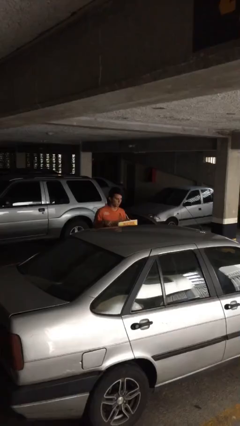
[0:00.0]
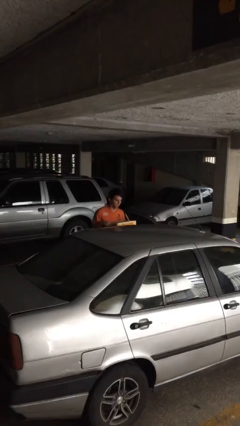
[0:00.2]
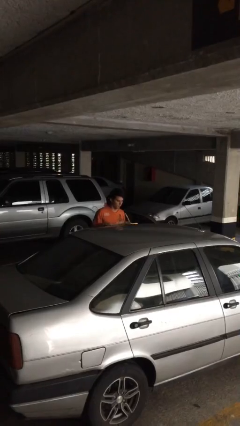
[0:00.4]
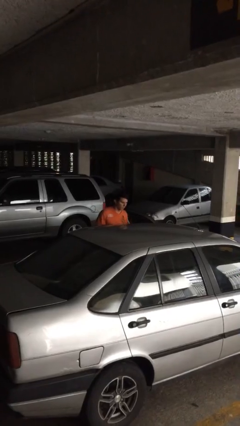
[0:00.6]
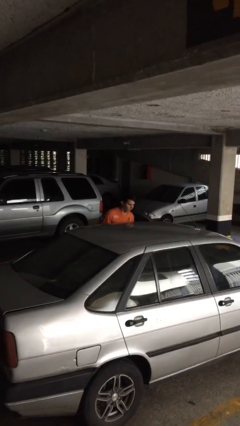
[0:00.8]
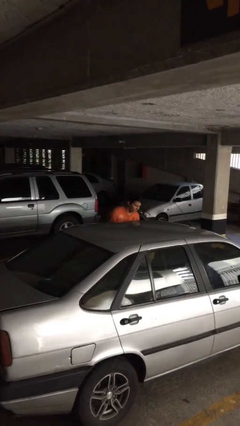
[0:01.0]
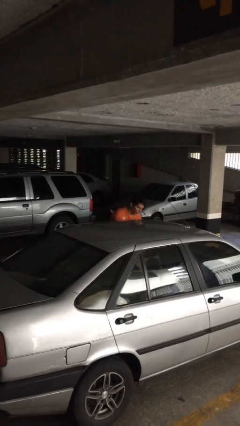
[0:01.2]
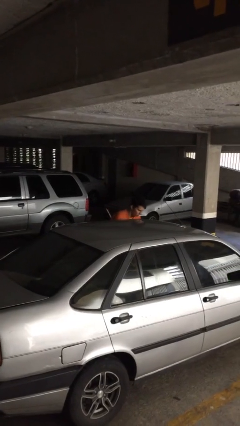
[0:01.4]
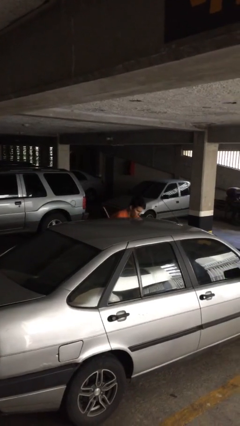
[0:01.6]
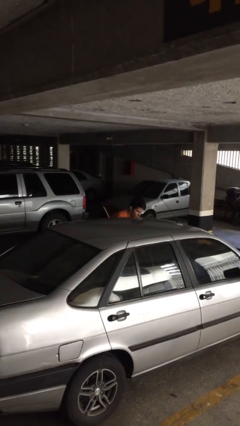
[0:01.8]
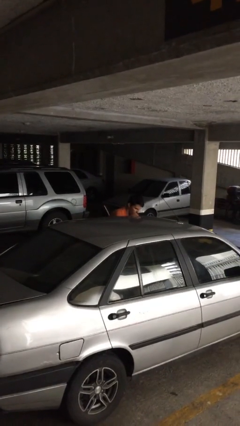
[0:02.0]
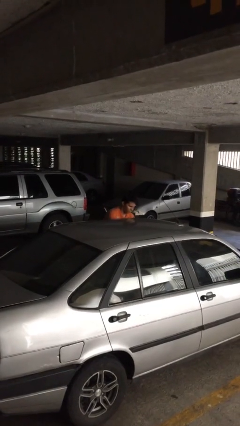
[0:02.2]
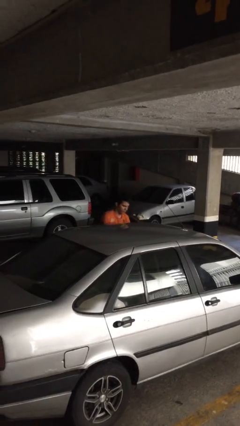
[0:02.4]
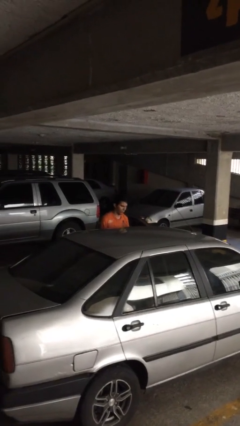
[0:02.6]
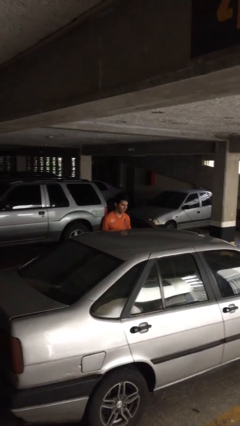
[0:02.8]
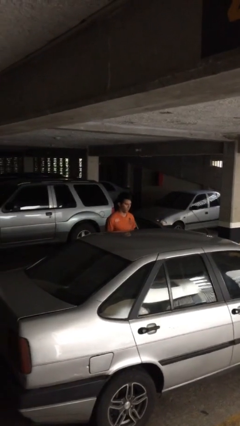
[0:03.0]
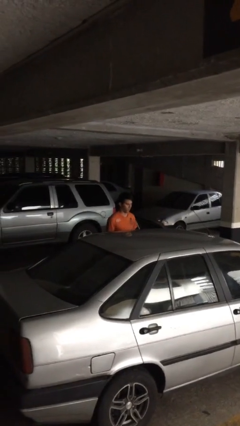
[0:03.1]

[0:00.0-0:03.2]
person loads car

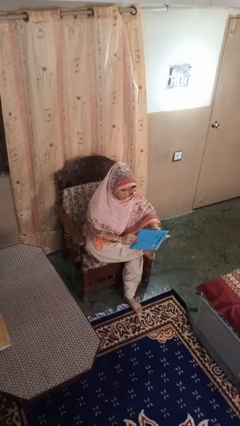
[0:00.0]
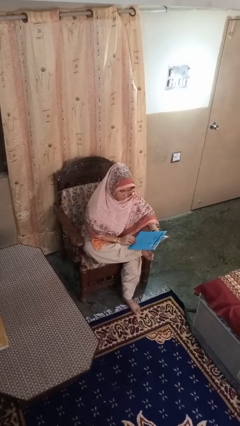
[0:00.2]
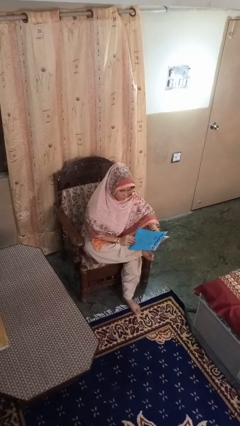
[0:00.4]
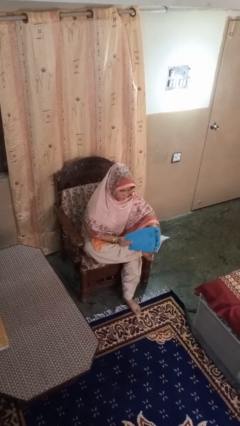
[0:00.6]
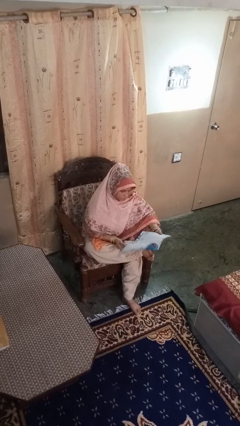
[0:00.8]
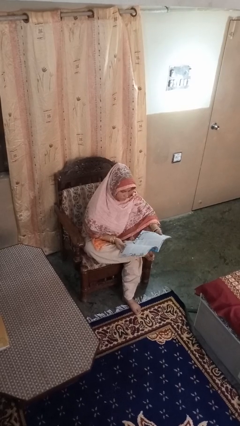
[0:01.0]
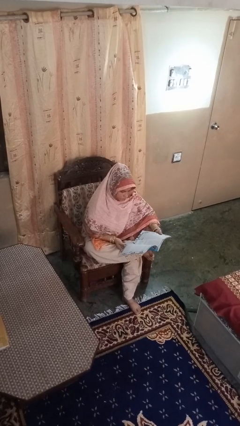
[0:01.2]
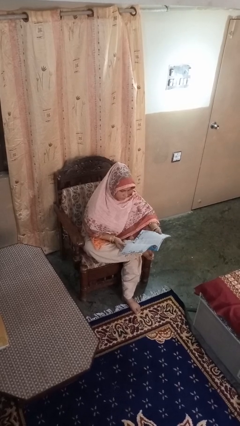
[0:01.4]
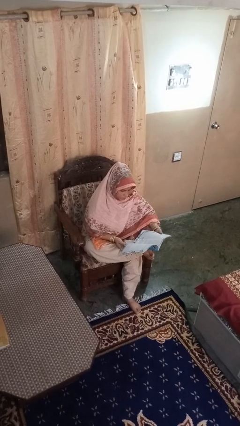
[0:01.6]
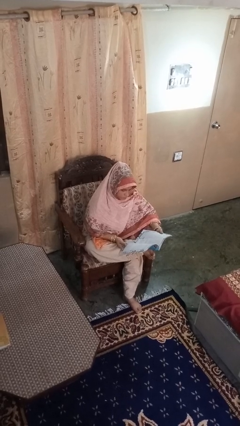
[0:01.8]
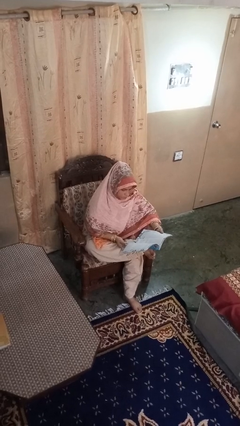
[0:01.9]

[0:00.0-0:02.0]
person reads magazine

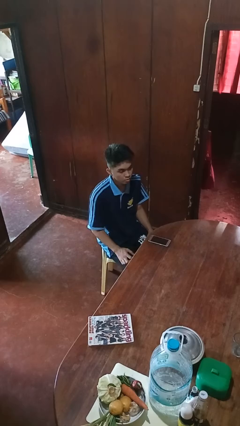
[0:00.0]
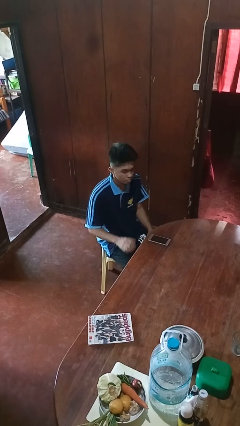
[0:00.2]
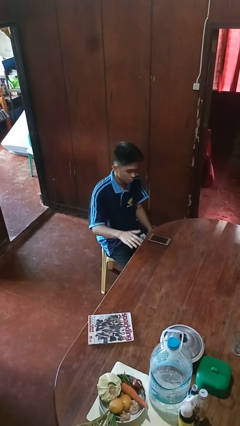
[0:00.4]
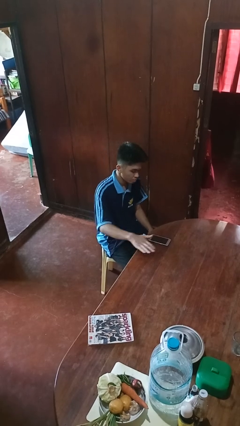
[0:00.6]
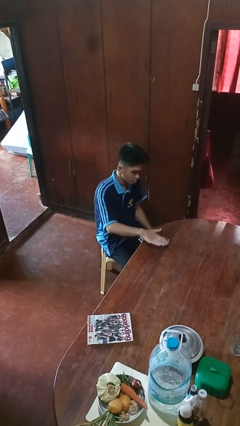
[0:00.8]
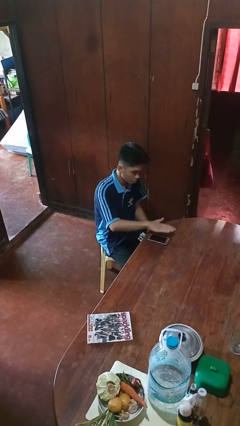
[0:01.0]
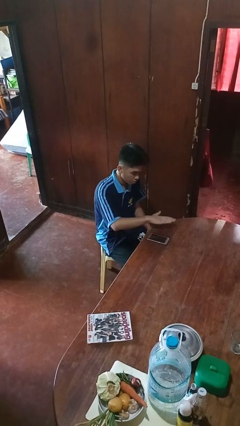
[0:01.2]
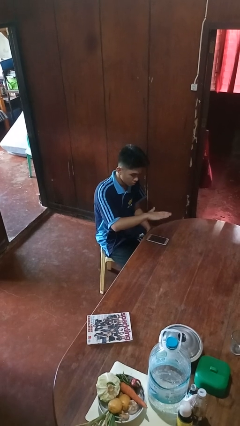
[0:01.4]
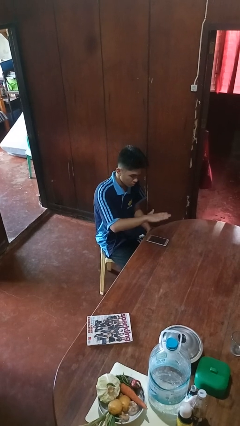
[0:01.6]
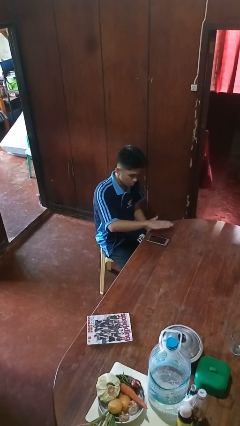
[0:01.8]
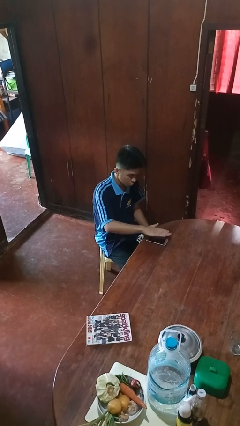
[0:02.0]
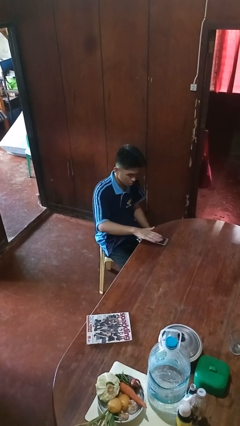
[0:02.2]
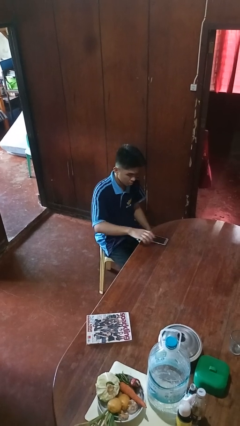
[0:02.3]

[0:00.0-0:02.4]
person waves hand over object

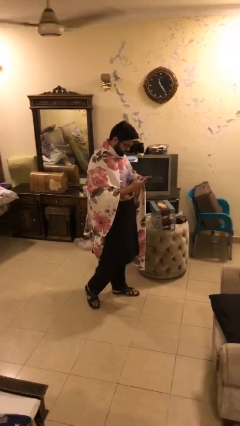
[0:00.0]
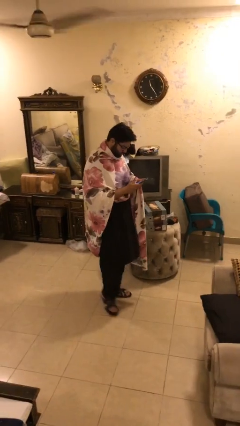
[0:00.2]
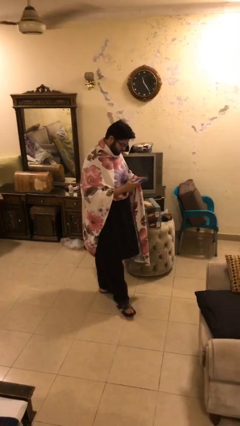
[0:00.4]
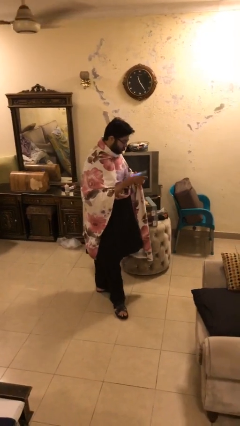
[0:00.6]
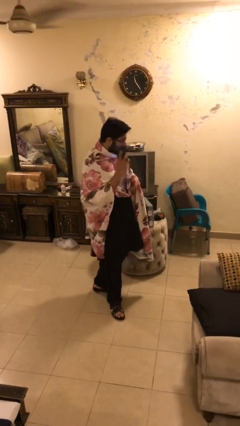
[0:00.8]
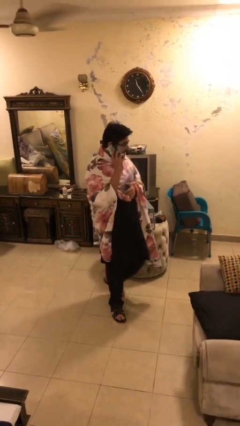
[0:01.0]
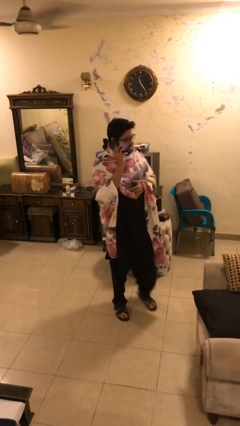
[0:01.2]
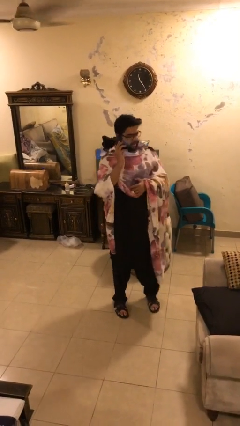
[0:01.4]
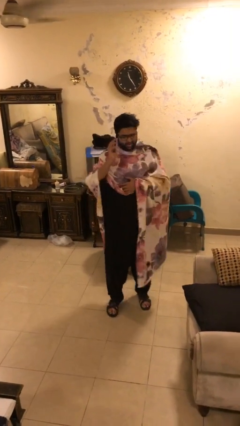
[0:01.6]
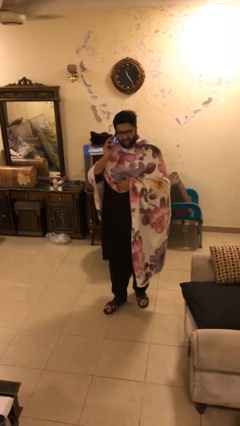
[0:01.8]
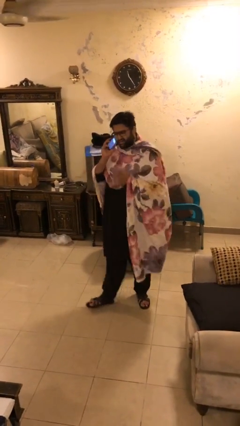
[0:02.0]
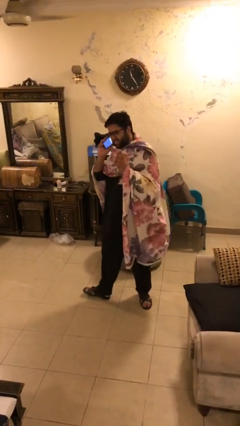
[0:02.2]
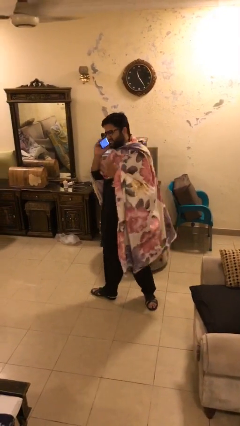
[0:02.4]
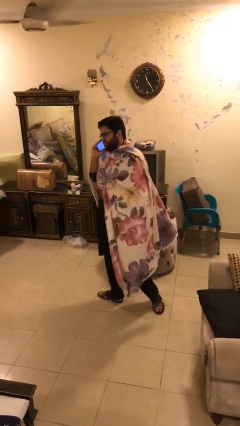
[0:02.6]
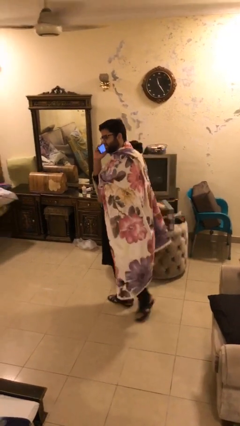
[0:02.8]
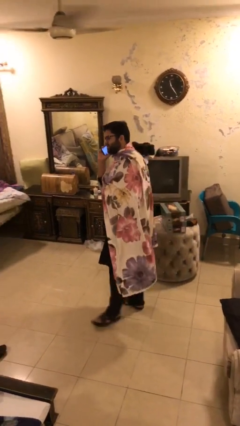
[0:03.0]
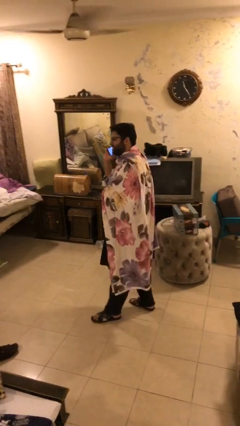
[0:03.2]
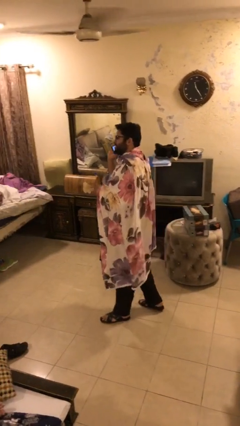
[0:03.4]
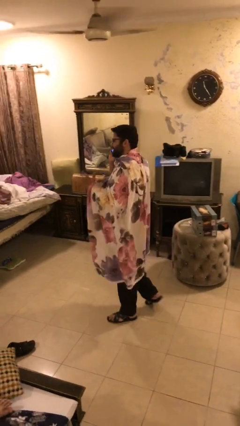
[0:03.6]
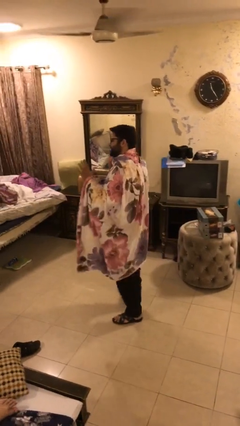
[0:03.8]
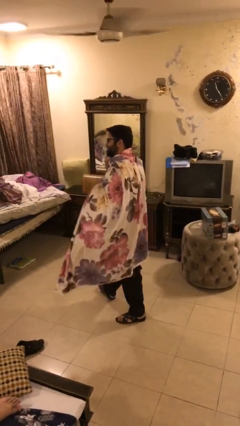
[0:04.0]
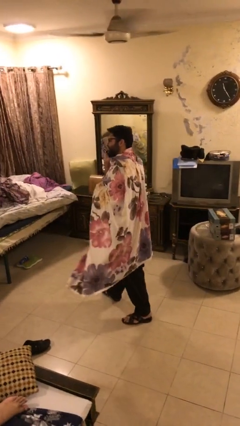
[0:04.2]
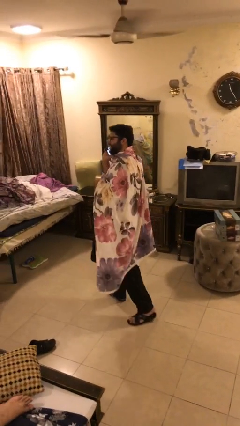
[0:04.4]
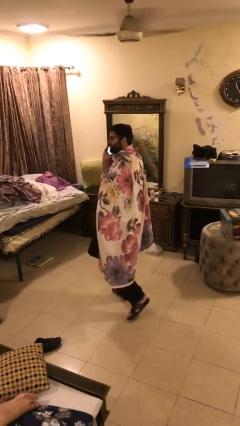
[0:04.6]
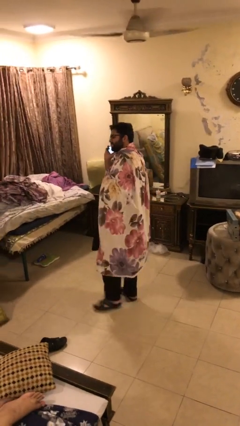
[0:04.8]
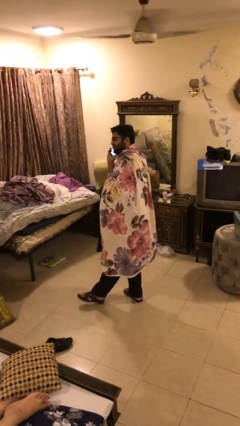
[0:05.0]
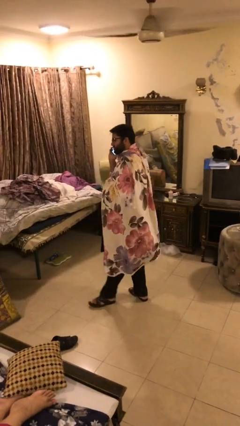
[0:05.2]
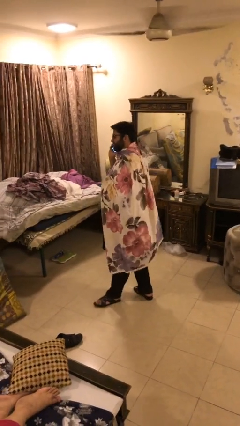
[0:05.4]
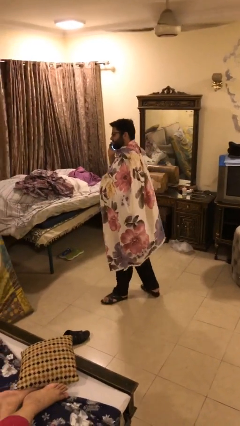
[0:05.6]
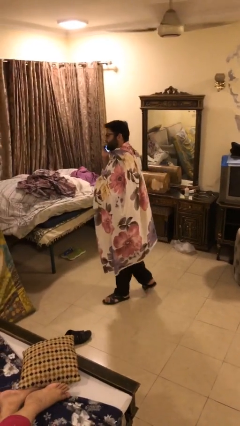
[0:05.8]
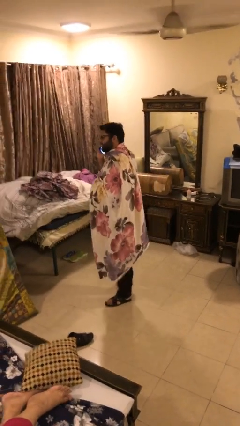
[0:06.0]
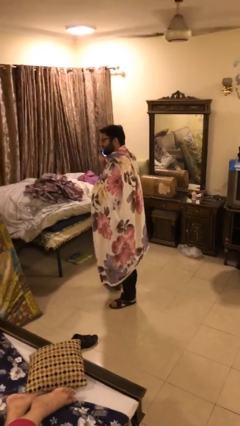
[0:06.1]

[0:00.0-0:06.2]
person talks on phone

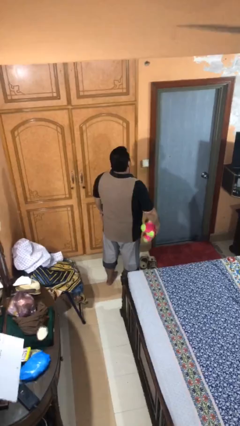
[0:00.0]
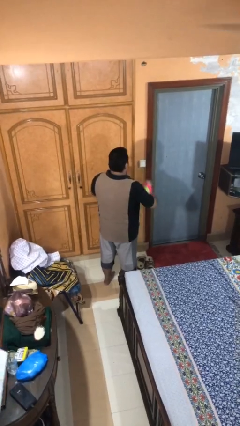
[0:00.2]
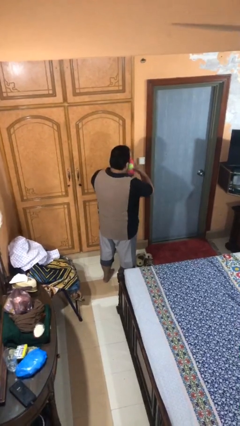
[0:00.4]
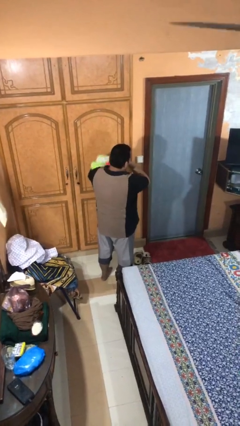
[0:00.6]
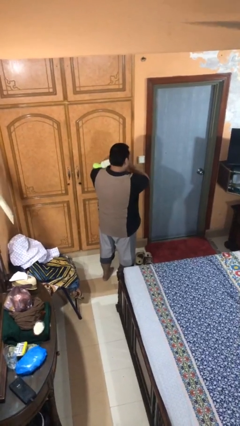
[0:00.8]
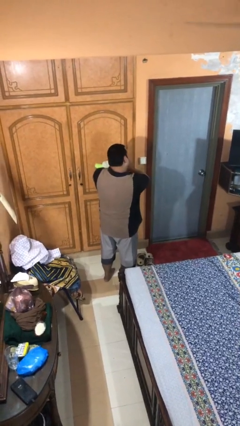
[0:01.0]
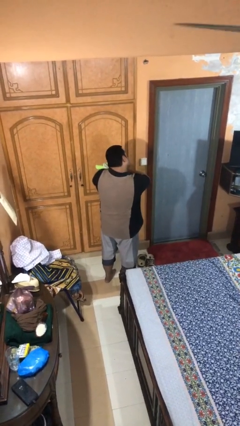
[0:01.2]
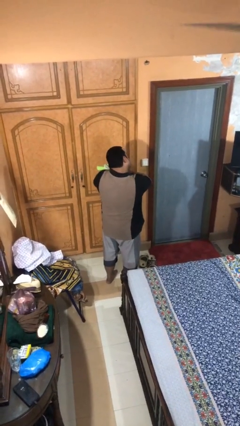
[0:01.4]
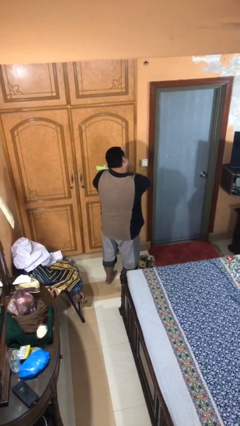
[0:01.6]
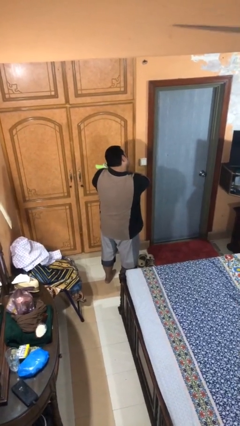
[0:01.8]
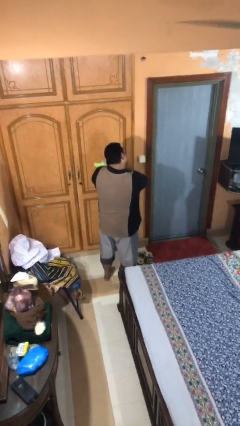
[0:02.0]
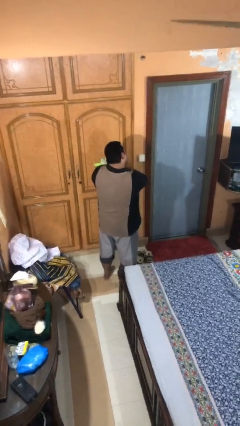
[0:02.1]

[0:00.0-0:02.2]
person hugs stuffed animal

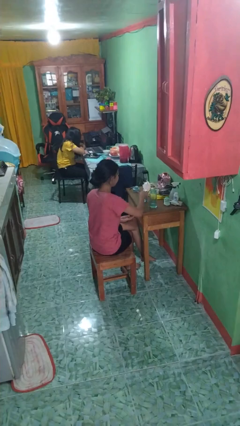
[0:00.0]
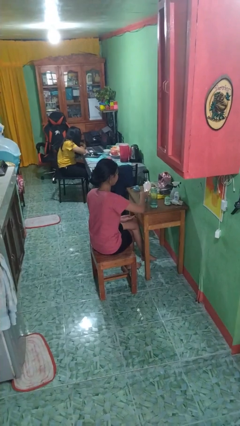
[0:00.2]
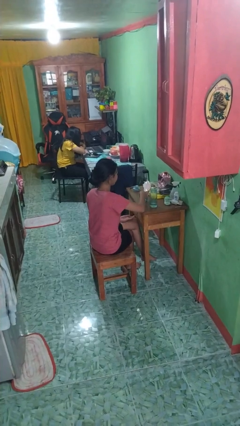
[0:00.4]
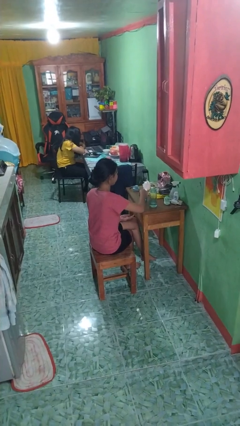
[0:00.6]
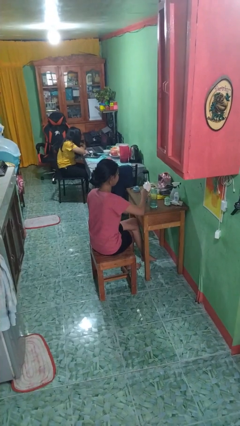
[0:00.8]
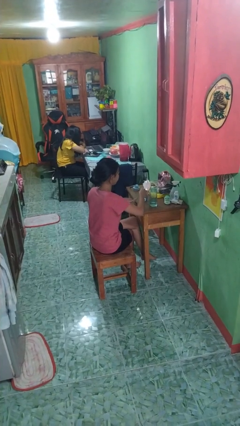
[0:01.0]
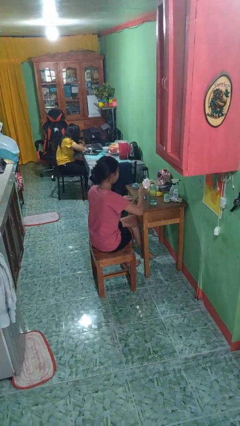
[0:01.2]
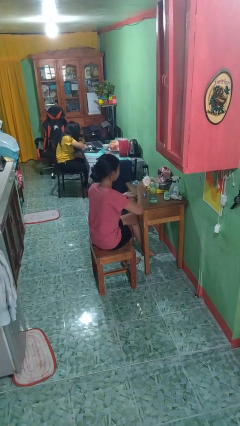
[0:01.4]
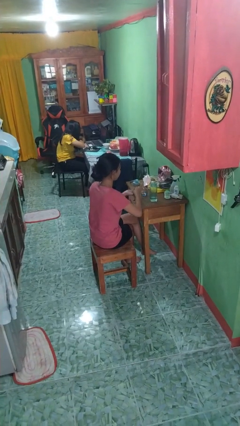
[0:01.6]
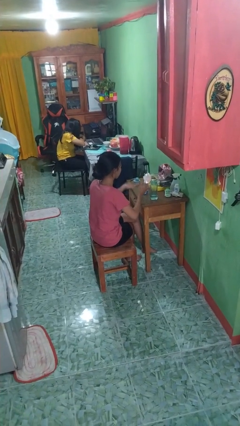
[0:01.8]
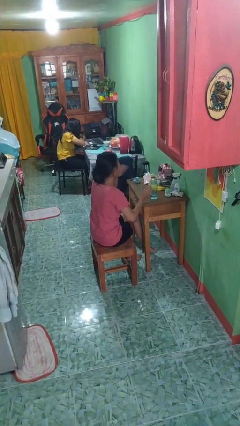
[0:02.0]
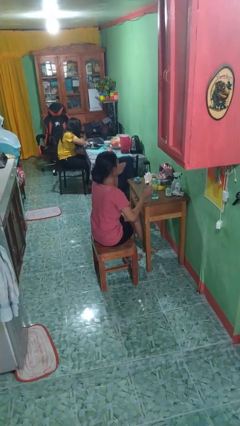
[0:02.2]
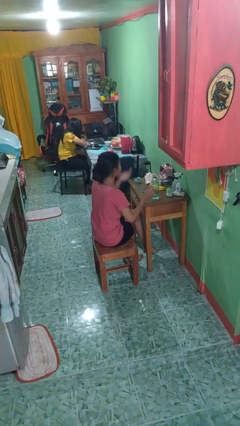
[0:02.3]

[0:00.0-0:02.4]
person takes medicine pills
